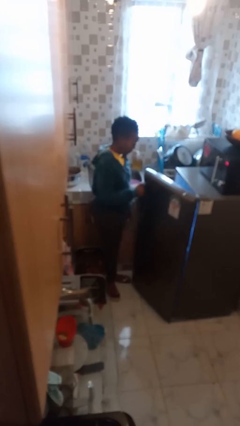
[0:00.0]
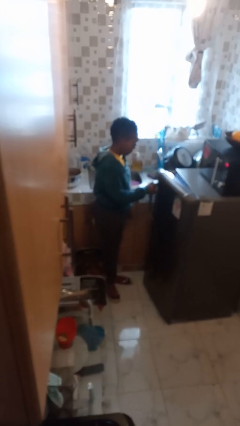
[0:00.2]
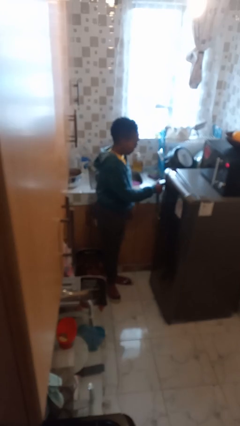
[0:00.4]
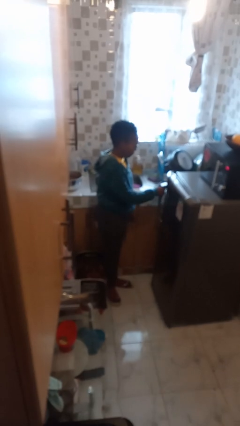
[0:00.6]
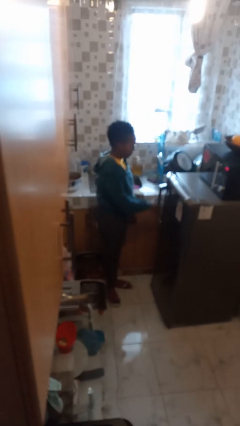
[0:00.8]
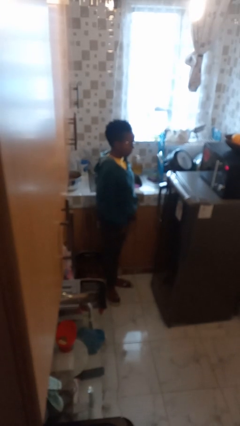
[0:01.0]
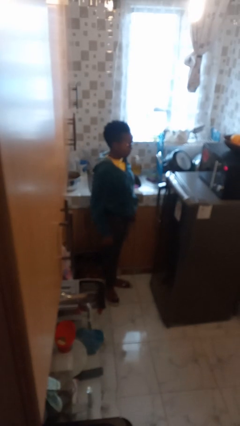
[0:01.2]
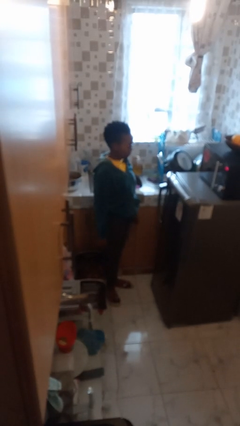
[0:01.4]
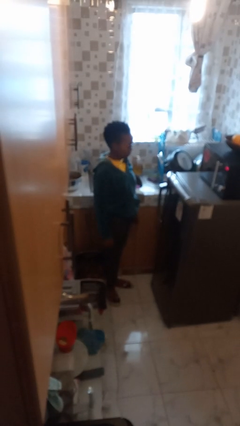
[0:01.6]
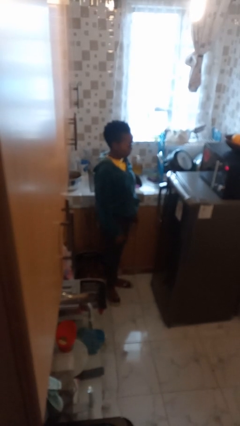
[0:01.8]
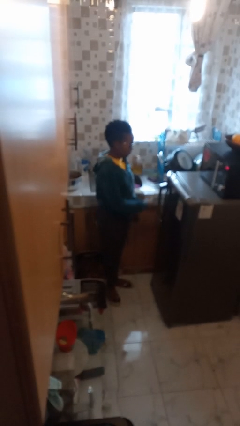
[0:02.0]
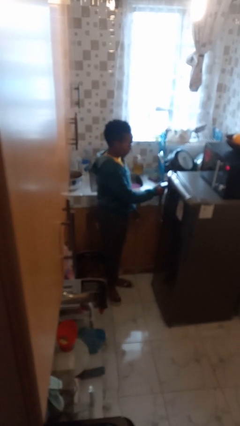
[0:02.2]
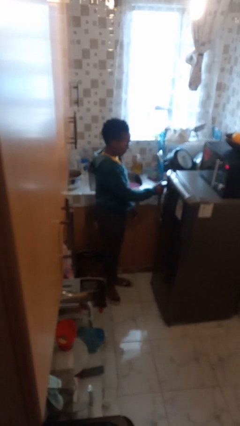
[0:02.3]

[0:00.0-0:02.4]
person closes refrigerator

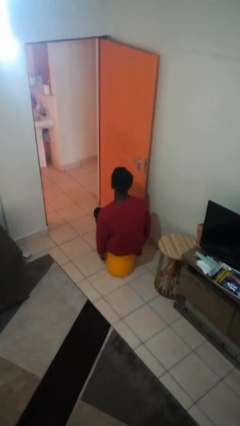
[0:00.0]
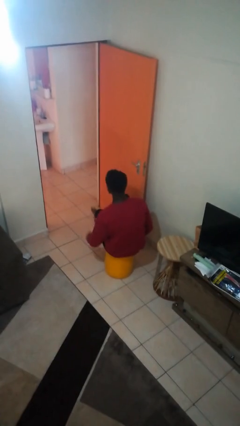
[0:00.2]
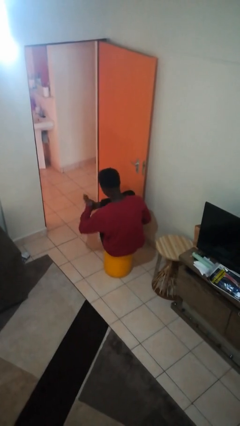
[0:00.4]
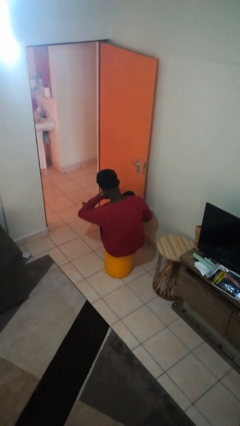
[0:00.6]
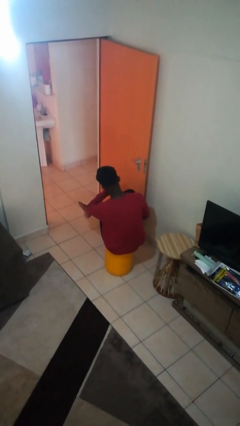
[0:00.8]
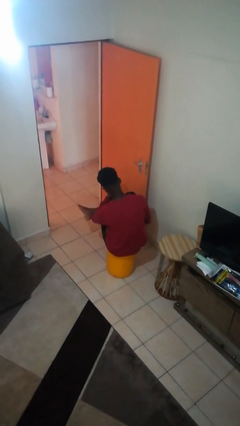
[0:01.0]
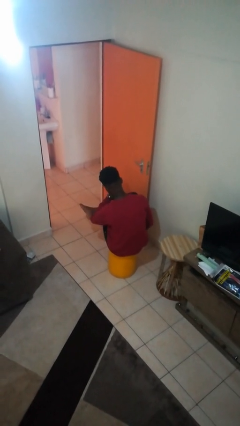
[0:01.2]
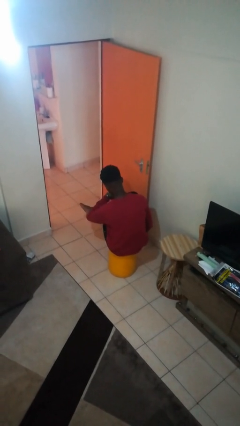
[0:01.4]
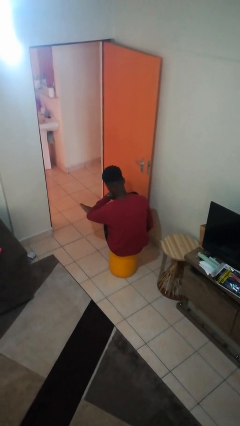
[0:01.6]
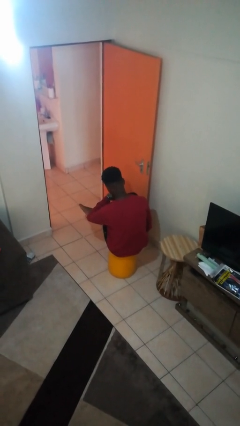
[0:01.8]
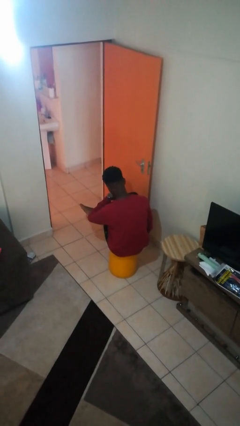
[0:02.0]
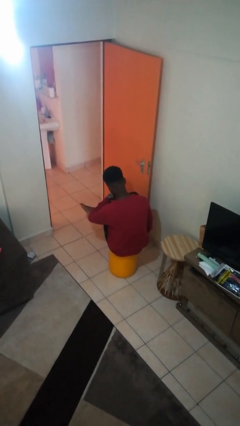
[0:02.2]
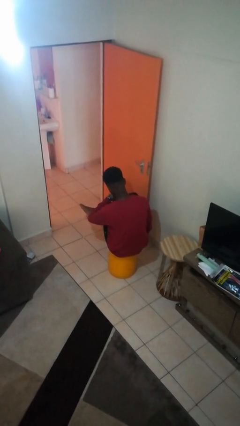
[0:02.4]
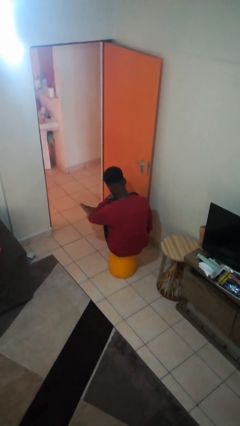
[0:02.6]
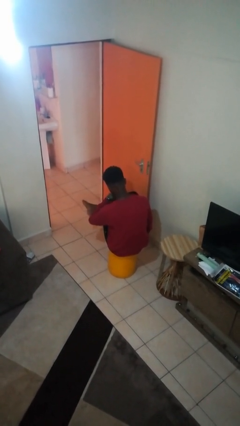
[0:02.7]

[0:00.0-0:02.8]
person looks at wristwatch

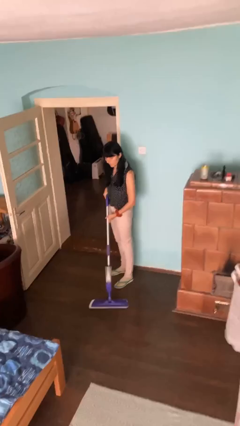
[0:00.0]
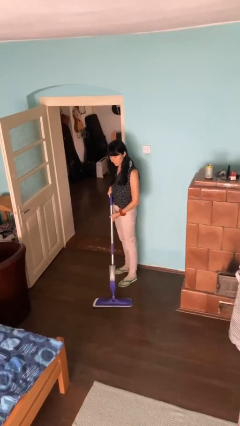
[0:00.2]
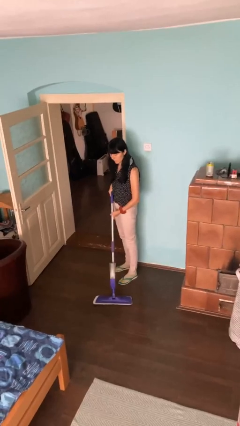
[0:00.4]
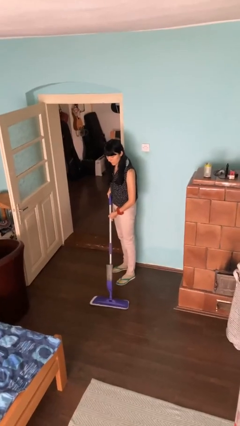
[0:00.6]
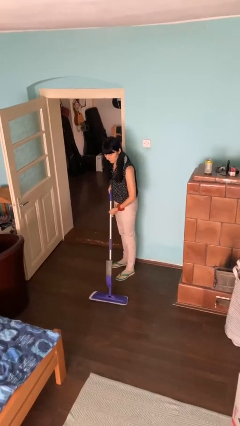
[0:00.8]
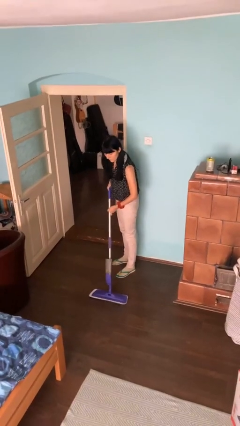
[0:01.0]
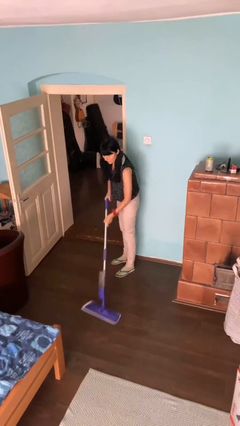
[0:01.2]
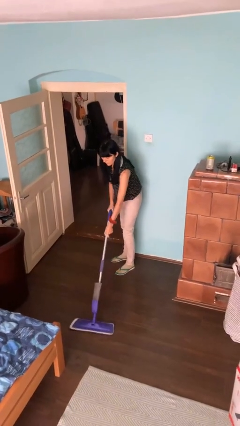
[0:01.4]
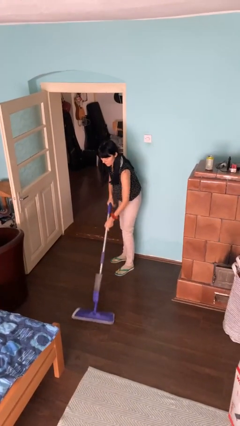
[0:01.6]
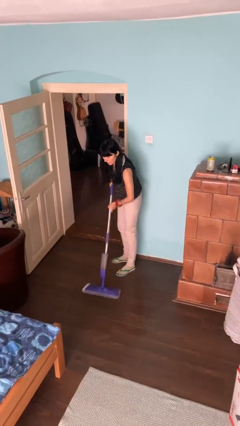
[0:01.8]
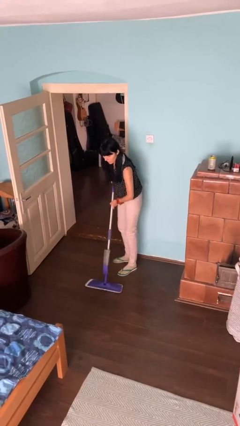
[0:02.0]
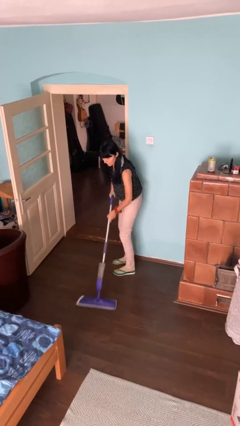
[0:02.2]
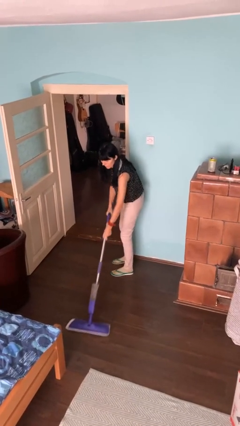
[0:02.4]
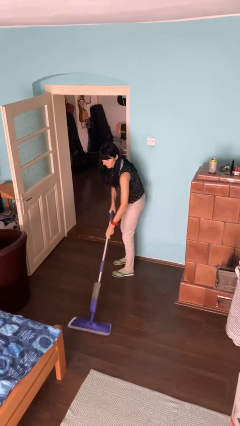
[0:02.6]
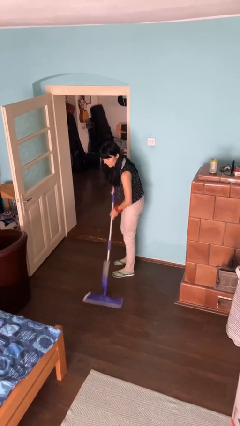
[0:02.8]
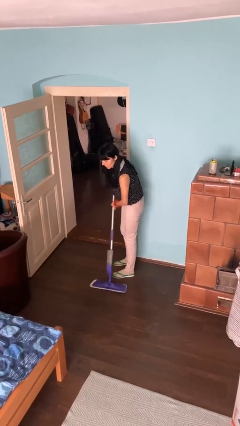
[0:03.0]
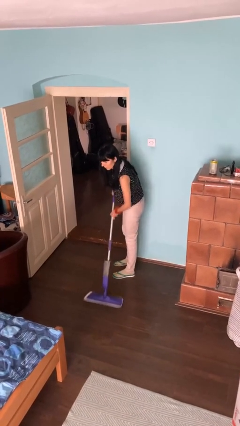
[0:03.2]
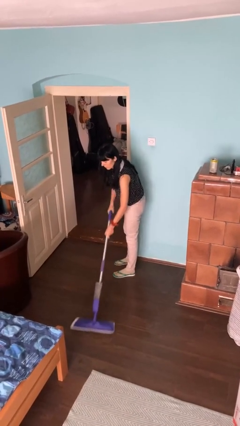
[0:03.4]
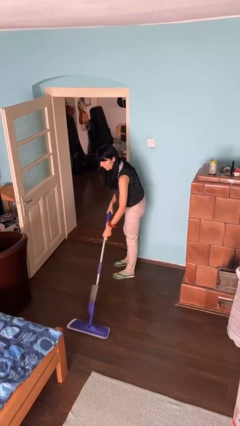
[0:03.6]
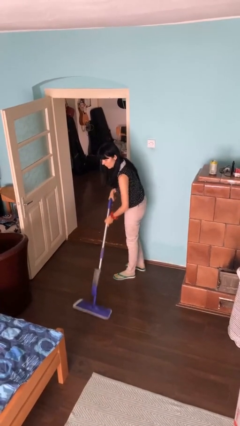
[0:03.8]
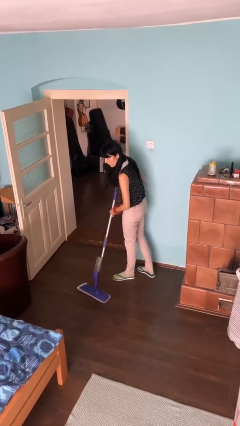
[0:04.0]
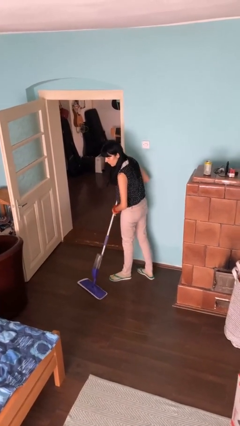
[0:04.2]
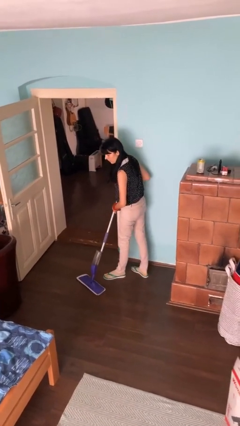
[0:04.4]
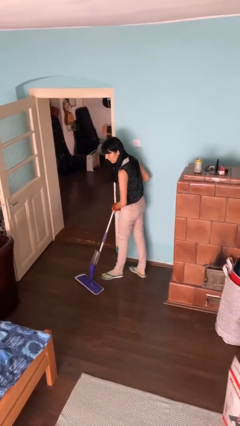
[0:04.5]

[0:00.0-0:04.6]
person mops

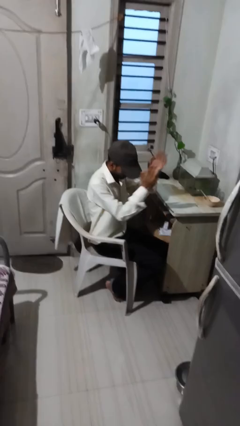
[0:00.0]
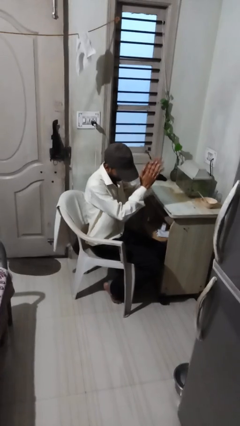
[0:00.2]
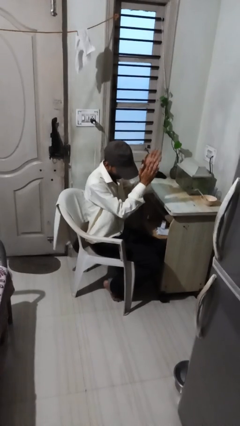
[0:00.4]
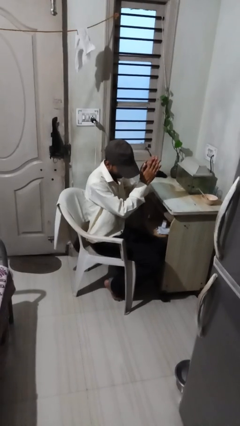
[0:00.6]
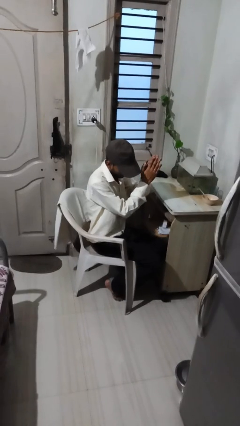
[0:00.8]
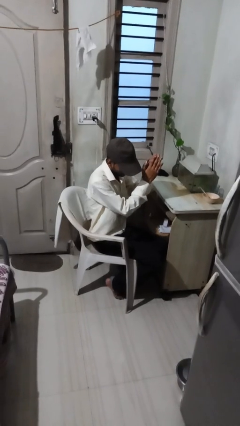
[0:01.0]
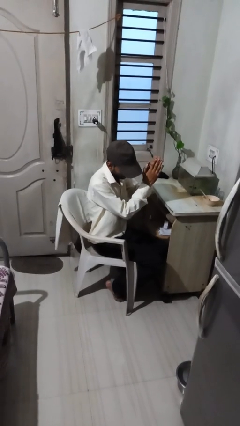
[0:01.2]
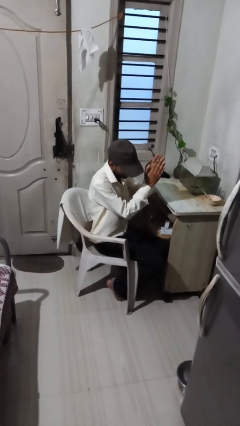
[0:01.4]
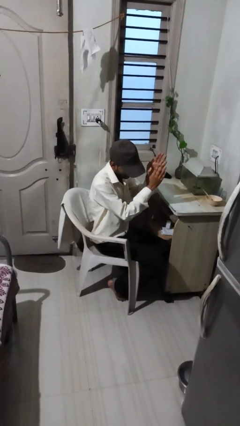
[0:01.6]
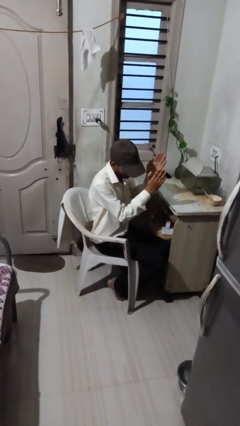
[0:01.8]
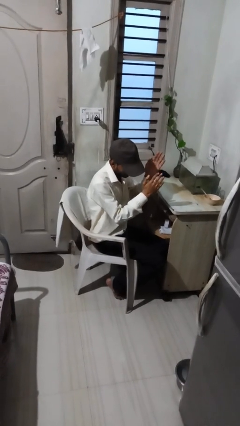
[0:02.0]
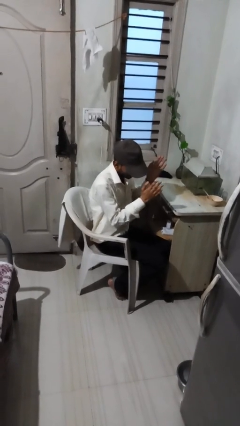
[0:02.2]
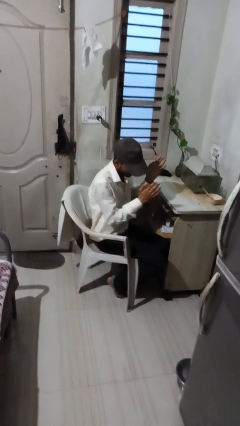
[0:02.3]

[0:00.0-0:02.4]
person claps hands

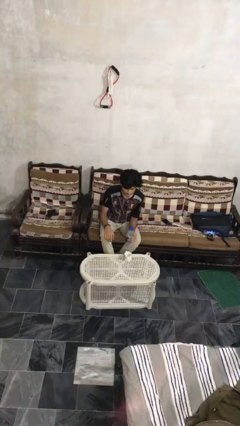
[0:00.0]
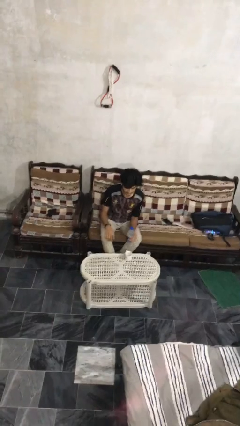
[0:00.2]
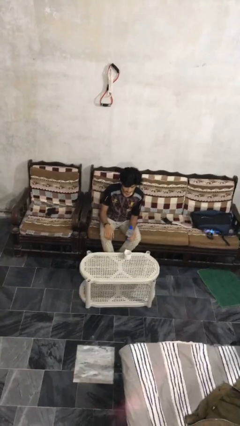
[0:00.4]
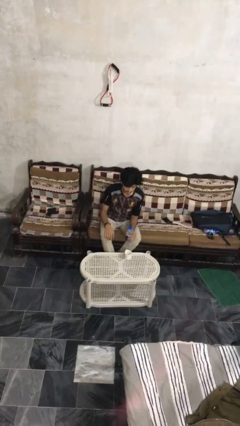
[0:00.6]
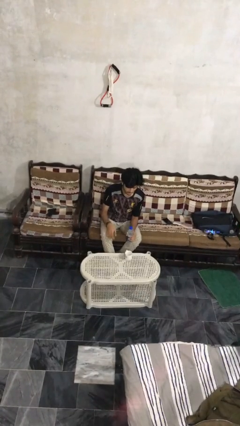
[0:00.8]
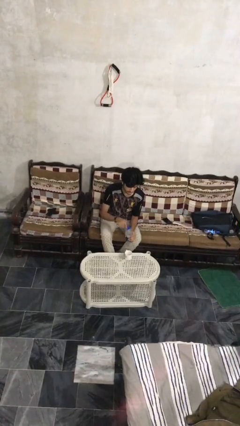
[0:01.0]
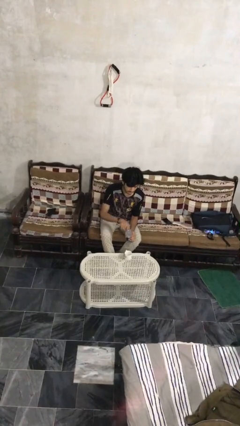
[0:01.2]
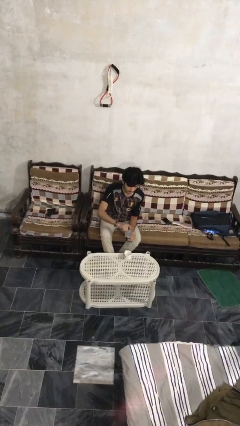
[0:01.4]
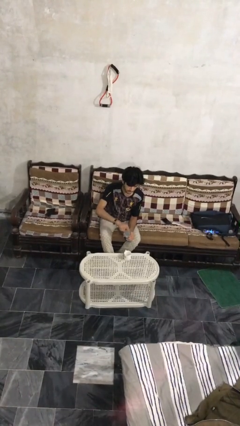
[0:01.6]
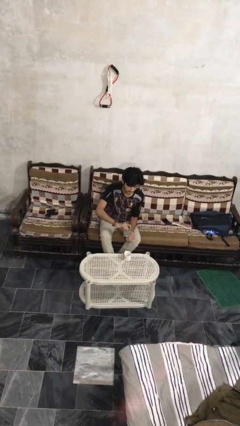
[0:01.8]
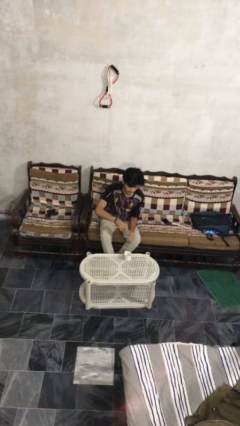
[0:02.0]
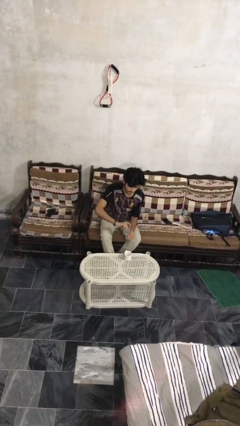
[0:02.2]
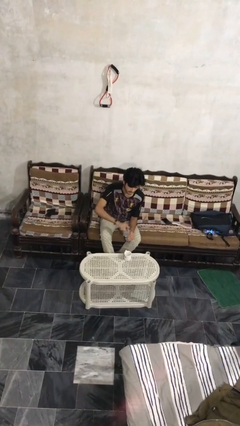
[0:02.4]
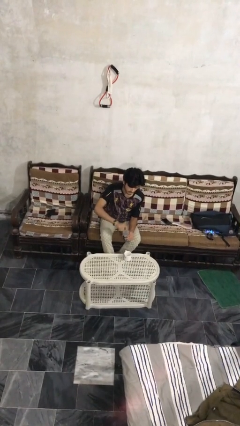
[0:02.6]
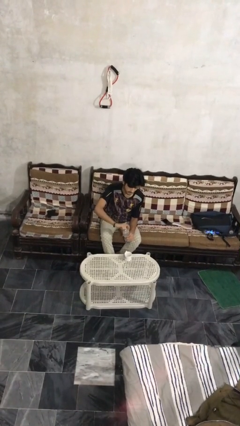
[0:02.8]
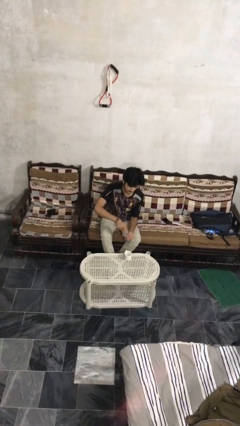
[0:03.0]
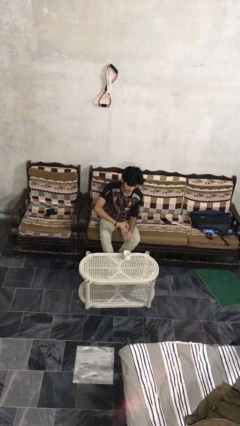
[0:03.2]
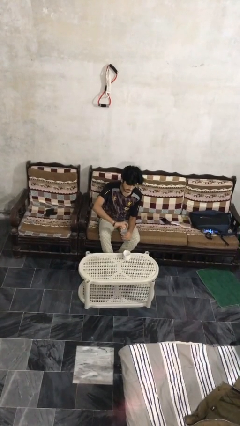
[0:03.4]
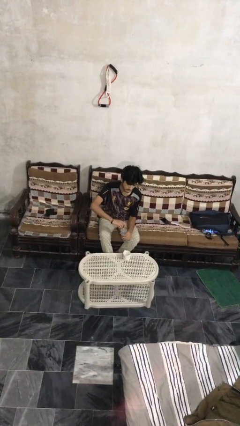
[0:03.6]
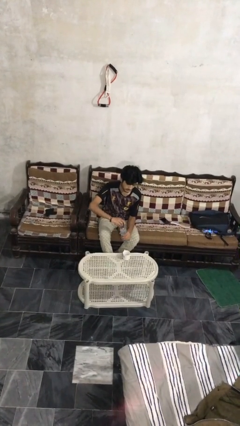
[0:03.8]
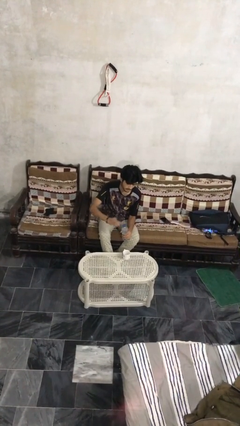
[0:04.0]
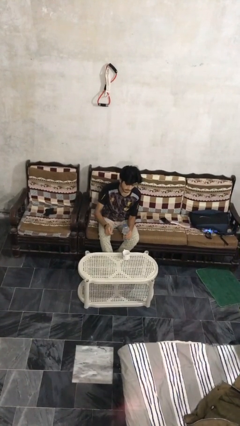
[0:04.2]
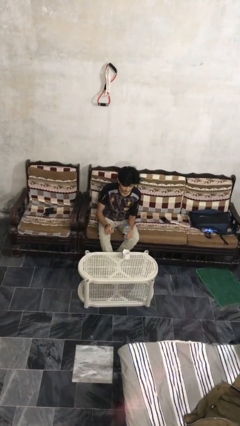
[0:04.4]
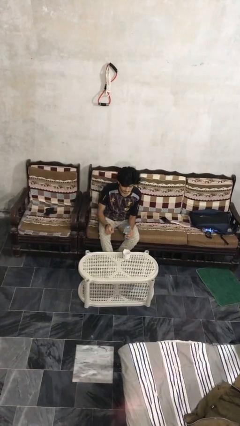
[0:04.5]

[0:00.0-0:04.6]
person unscrews lid from bottle

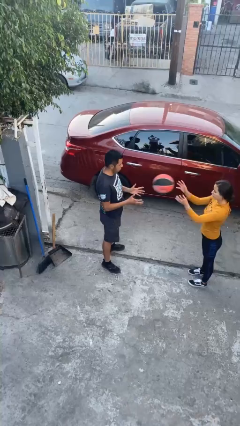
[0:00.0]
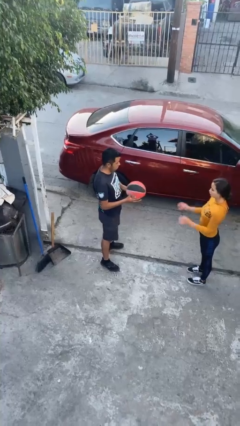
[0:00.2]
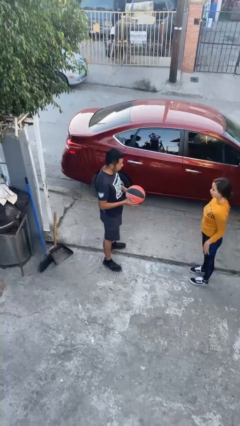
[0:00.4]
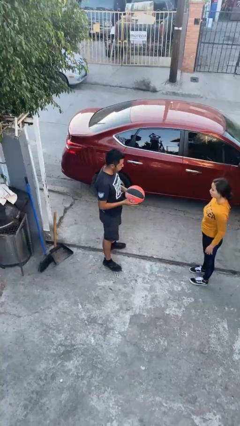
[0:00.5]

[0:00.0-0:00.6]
person catches object from person
